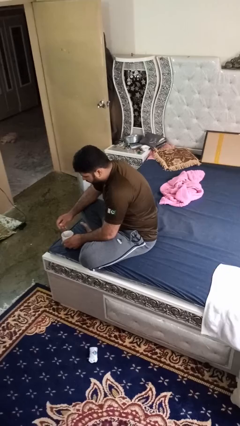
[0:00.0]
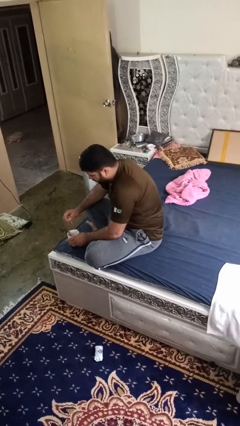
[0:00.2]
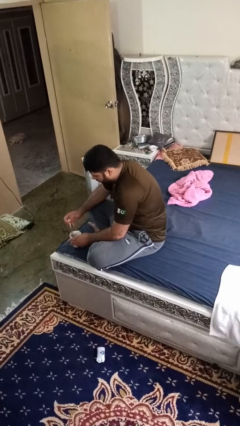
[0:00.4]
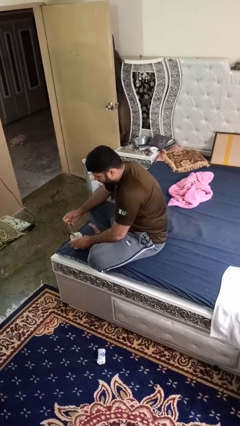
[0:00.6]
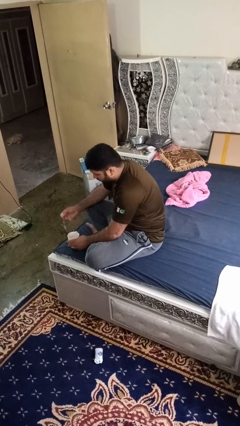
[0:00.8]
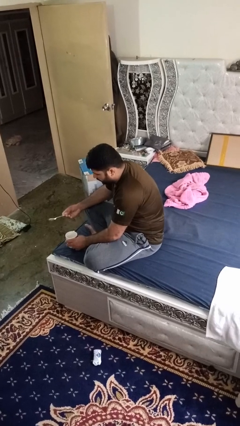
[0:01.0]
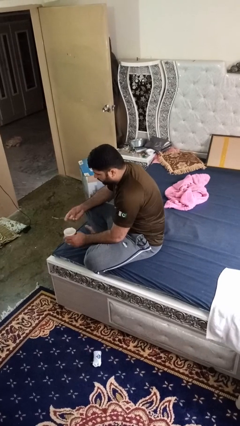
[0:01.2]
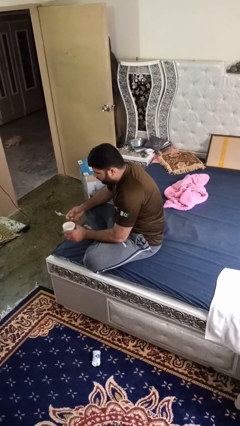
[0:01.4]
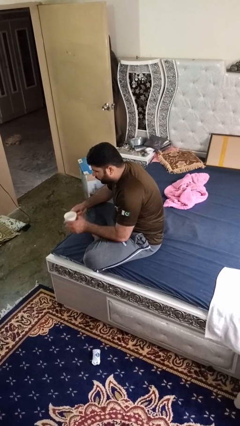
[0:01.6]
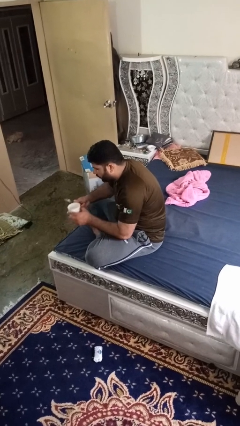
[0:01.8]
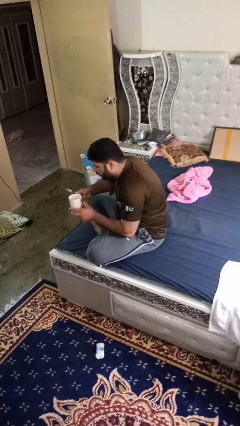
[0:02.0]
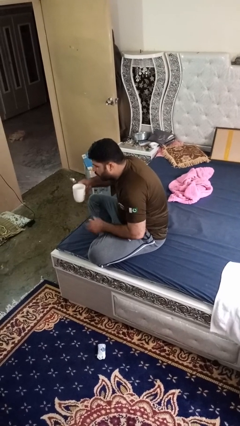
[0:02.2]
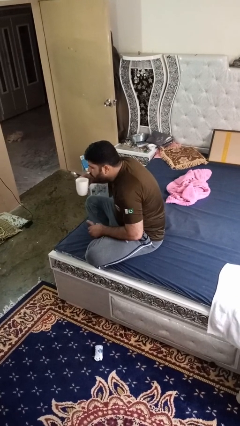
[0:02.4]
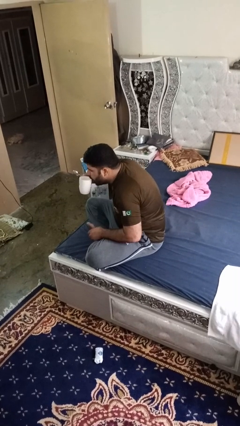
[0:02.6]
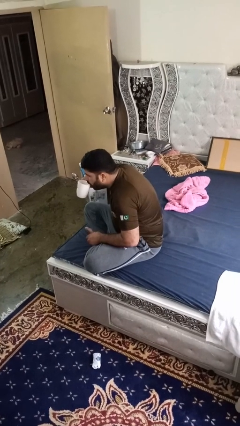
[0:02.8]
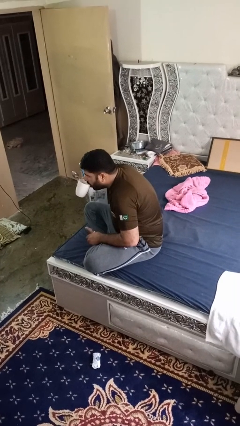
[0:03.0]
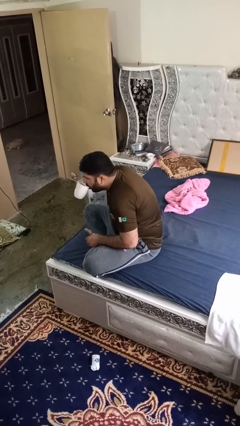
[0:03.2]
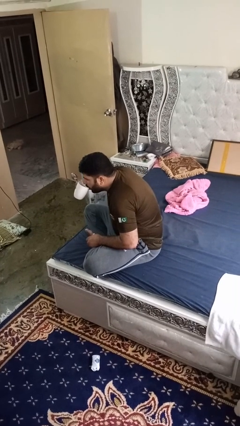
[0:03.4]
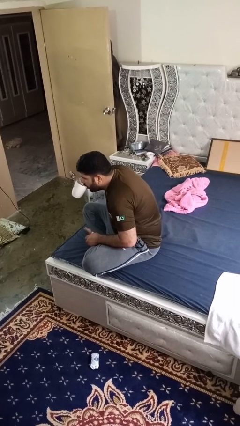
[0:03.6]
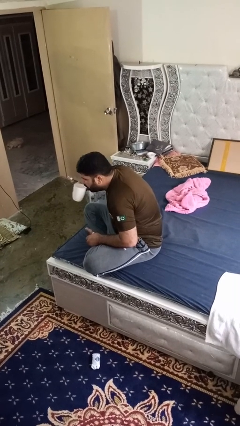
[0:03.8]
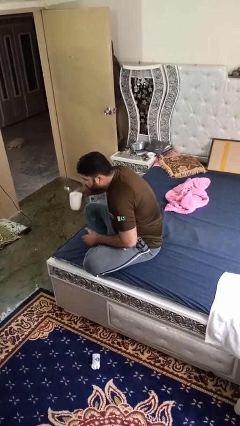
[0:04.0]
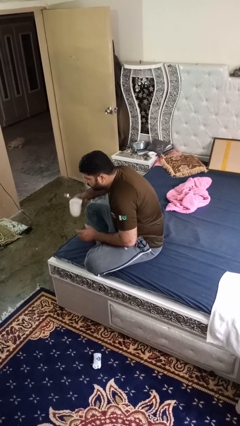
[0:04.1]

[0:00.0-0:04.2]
person drinks from mug

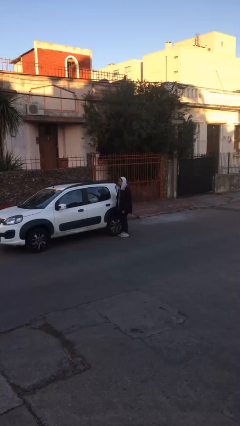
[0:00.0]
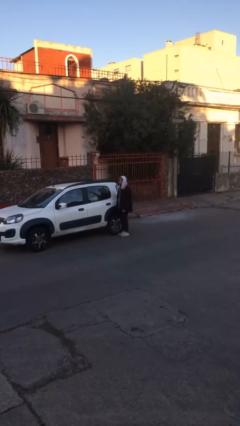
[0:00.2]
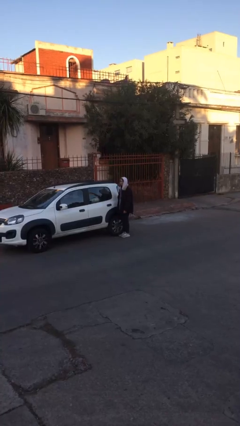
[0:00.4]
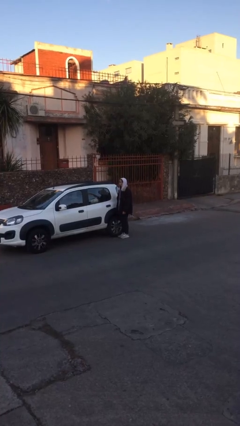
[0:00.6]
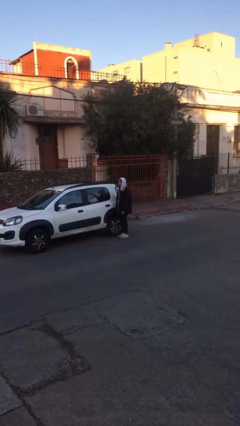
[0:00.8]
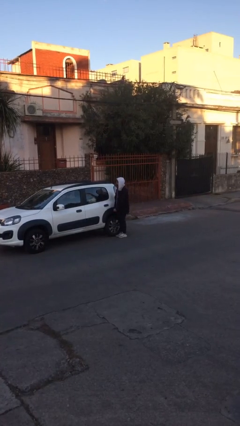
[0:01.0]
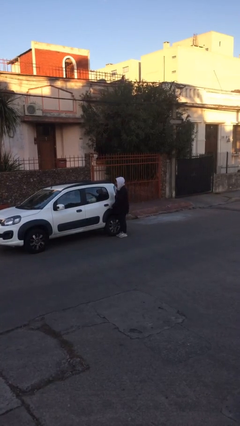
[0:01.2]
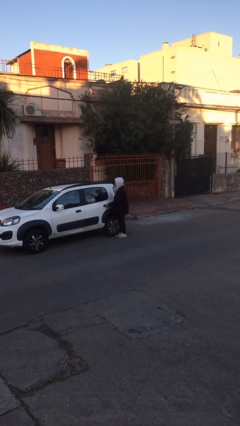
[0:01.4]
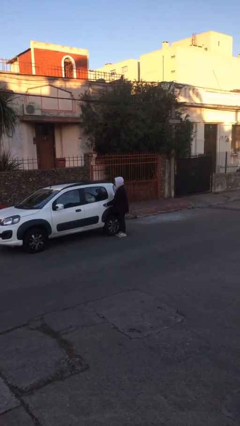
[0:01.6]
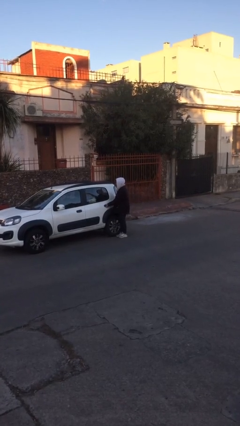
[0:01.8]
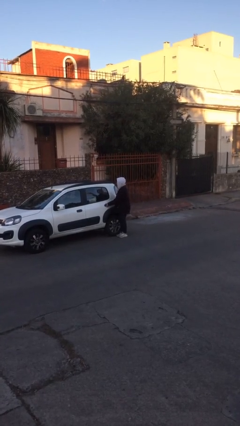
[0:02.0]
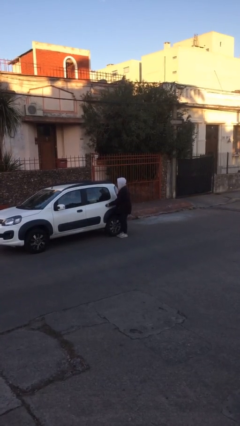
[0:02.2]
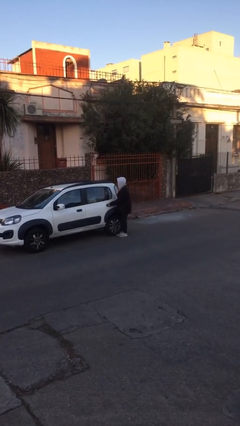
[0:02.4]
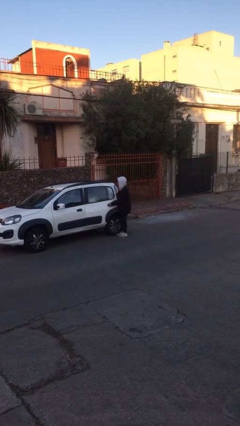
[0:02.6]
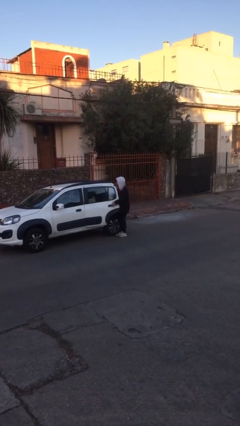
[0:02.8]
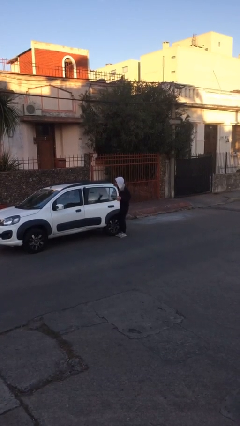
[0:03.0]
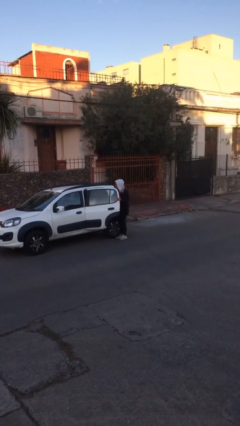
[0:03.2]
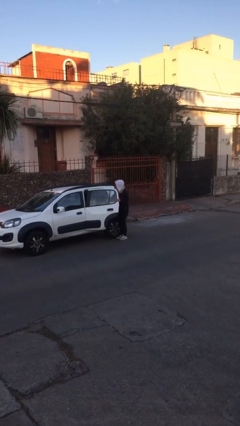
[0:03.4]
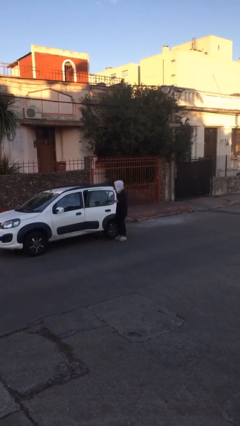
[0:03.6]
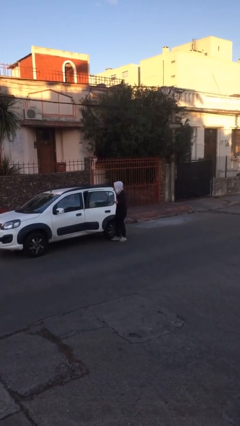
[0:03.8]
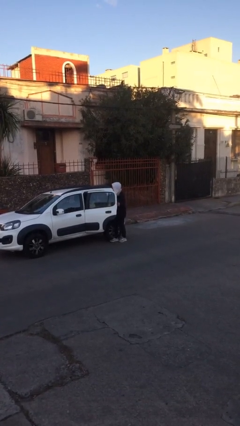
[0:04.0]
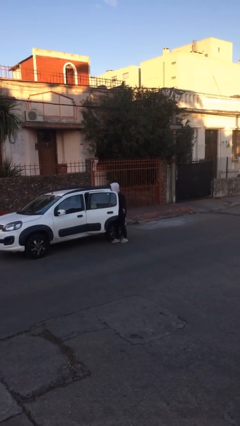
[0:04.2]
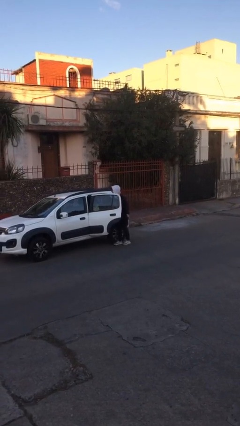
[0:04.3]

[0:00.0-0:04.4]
person opens car door

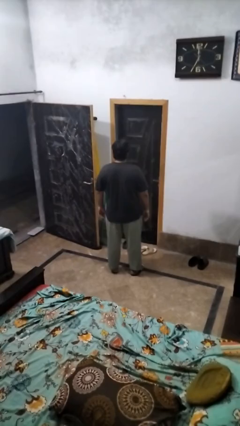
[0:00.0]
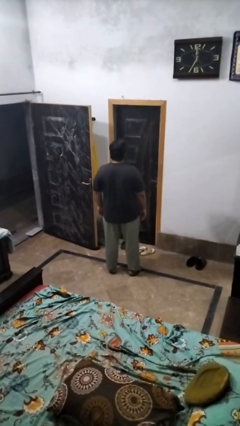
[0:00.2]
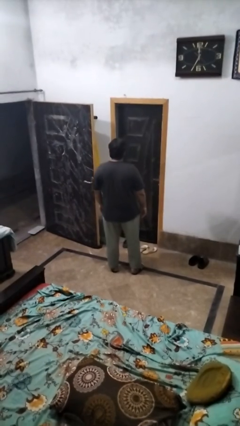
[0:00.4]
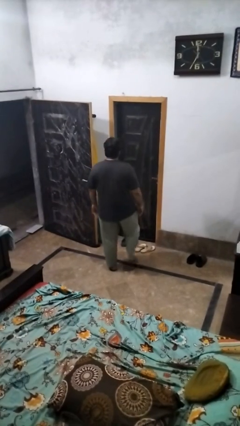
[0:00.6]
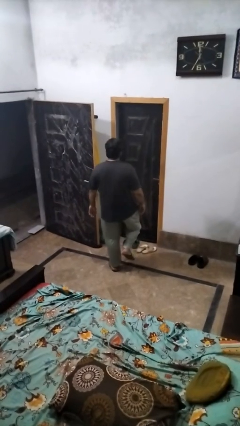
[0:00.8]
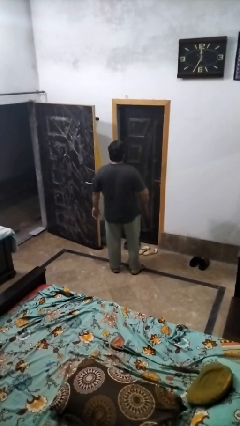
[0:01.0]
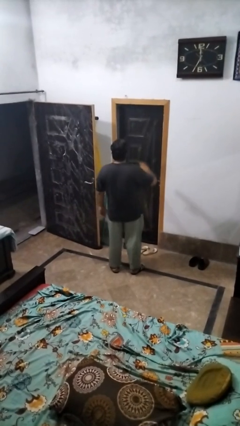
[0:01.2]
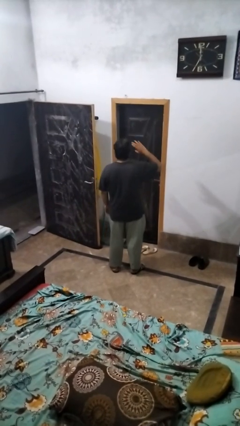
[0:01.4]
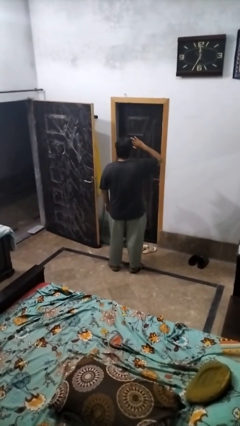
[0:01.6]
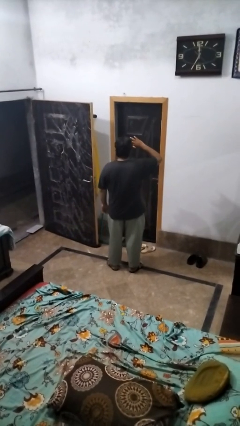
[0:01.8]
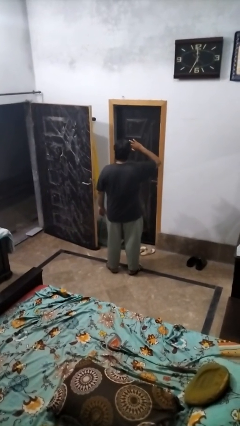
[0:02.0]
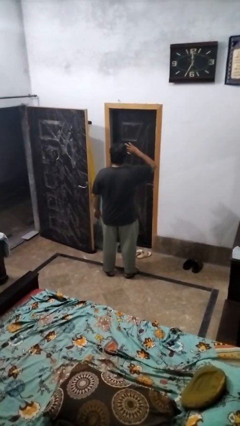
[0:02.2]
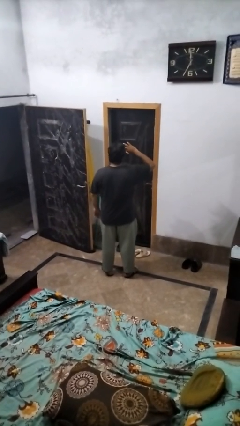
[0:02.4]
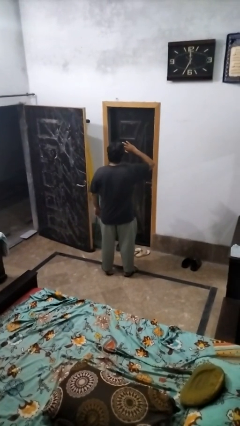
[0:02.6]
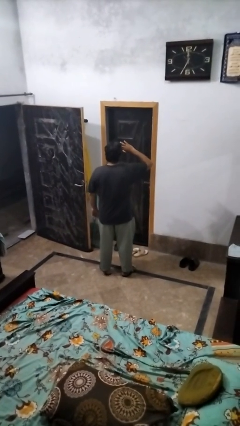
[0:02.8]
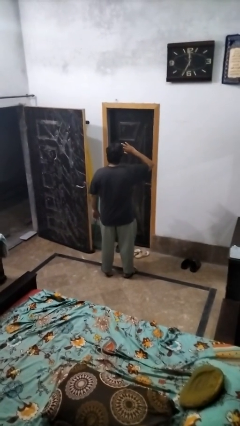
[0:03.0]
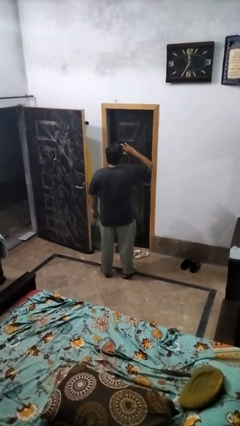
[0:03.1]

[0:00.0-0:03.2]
person salutes

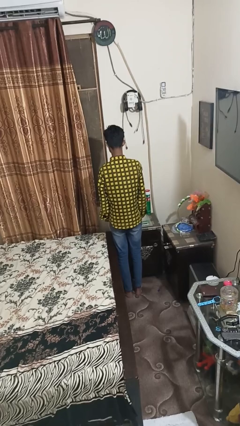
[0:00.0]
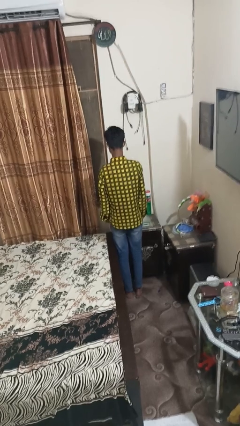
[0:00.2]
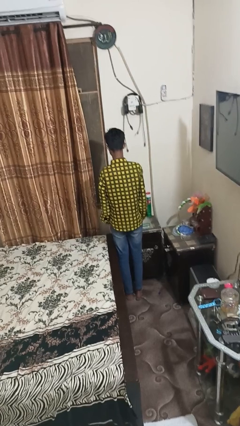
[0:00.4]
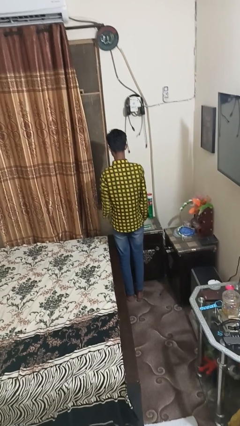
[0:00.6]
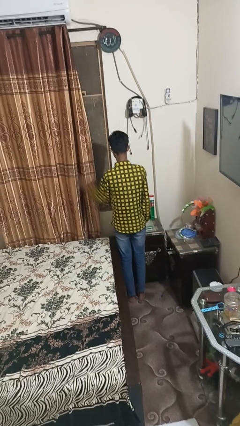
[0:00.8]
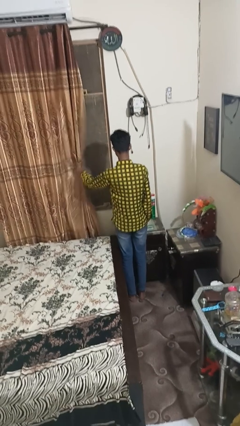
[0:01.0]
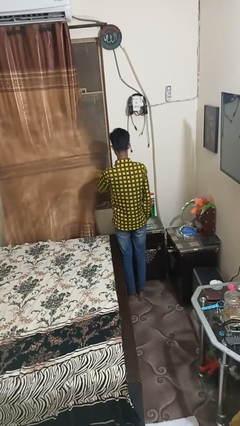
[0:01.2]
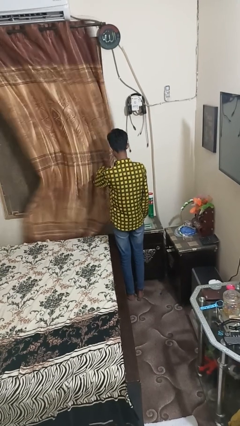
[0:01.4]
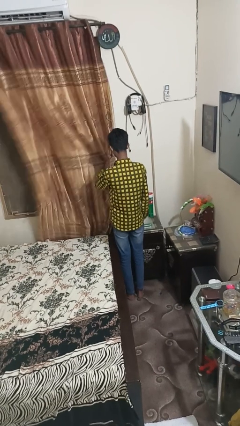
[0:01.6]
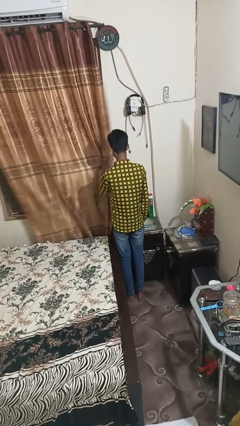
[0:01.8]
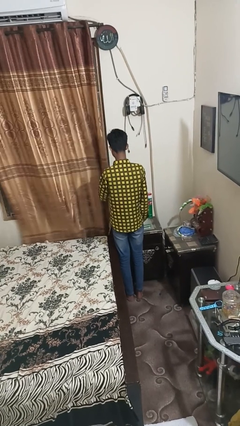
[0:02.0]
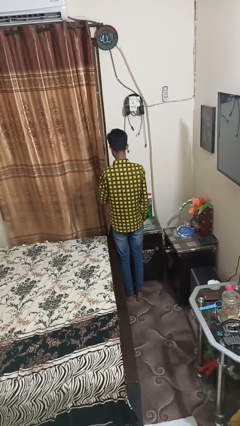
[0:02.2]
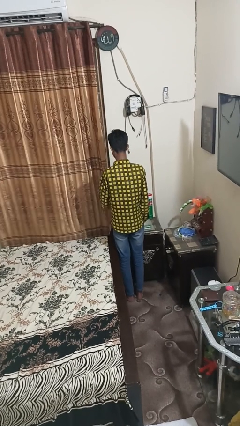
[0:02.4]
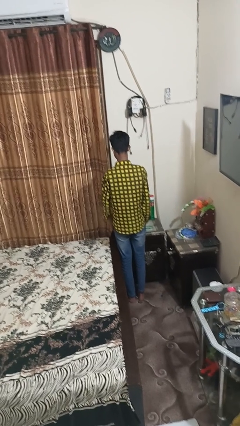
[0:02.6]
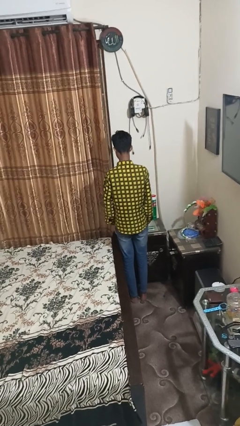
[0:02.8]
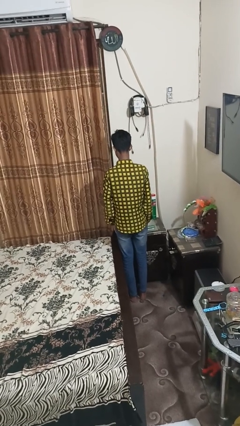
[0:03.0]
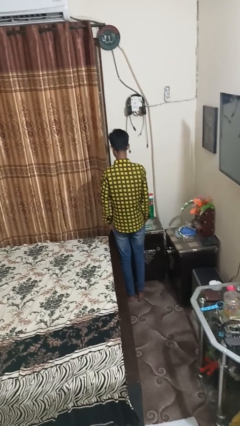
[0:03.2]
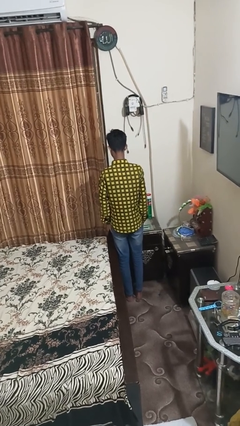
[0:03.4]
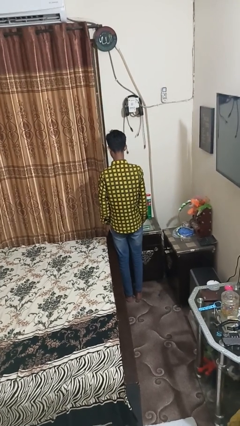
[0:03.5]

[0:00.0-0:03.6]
person closes curtains

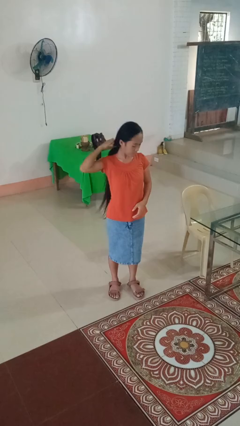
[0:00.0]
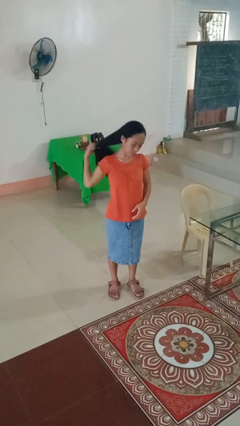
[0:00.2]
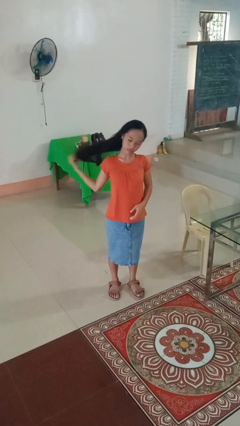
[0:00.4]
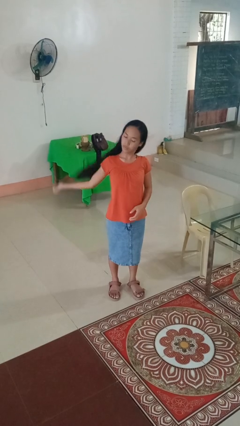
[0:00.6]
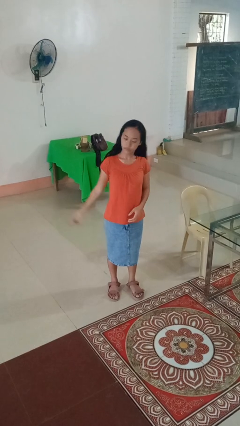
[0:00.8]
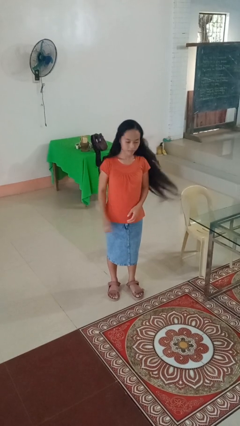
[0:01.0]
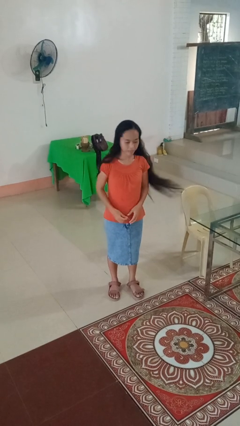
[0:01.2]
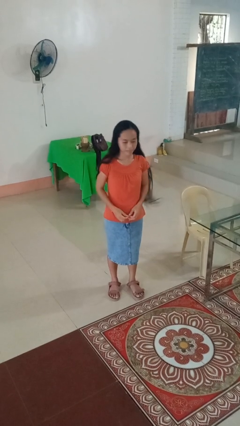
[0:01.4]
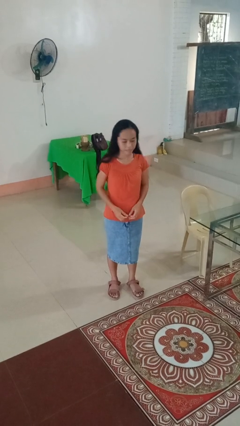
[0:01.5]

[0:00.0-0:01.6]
person takes off hairtie

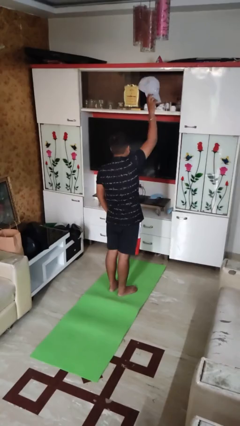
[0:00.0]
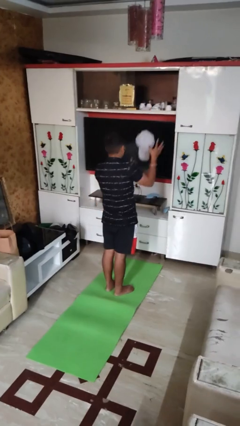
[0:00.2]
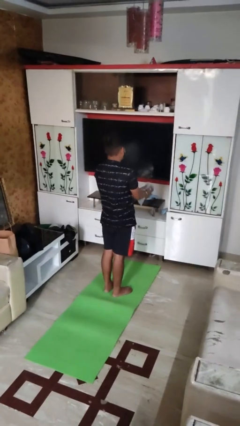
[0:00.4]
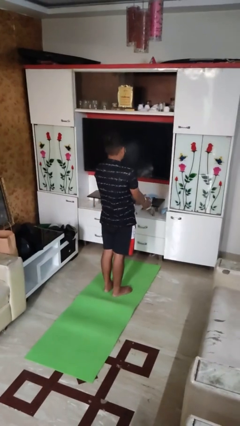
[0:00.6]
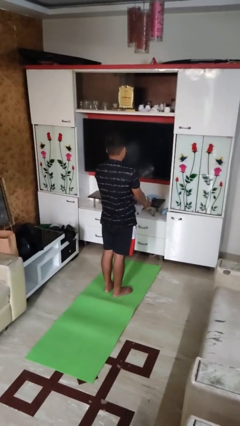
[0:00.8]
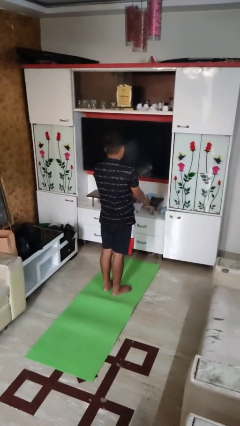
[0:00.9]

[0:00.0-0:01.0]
person catches dropped object
